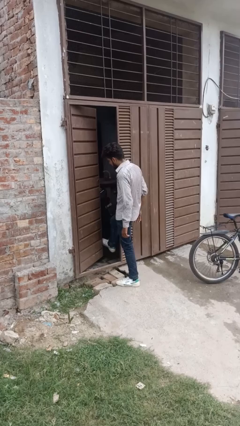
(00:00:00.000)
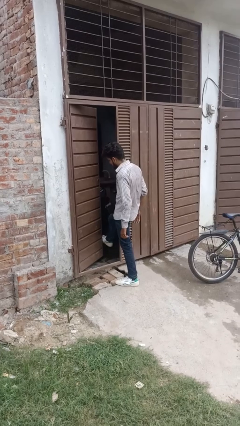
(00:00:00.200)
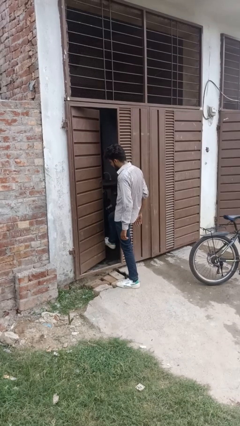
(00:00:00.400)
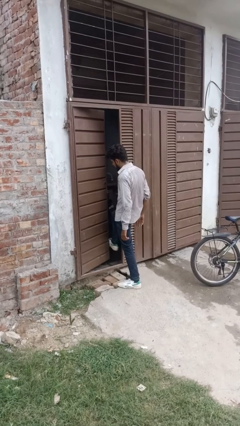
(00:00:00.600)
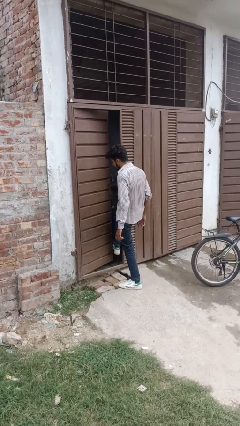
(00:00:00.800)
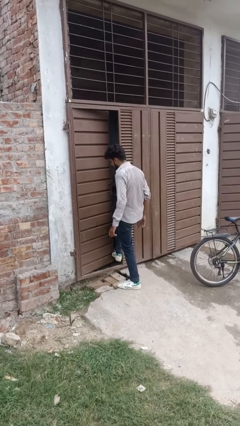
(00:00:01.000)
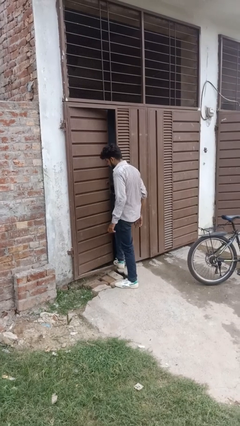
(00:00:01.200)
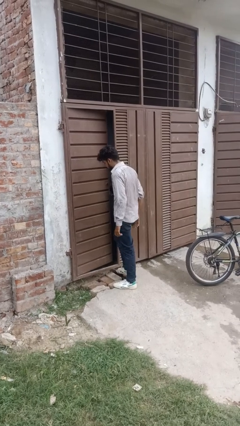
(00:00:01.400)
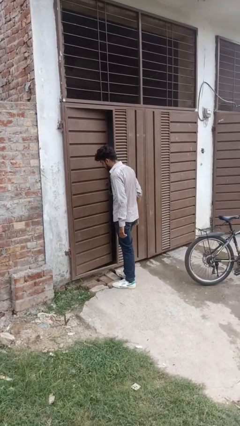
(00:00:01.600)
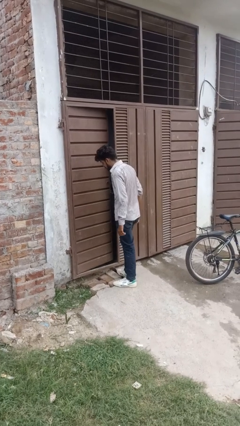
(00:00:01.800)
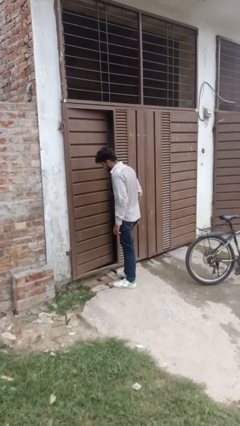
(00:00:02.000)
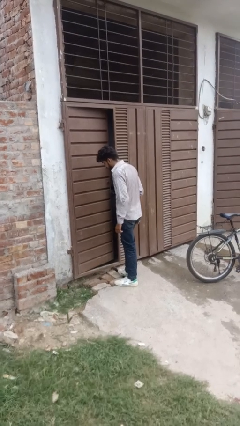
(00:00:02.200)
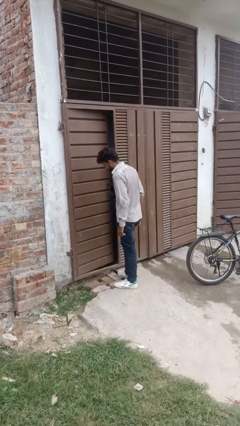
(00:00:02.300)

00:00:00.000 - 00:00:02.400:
person closes door with foot

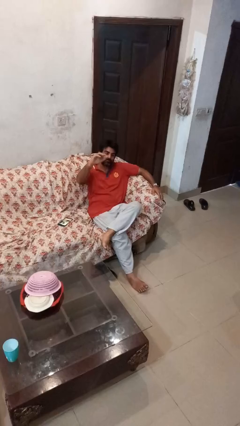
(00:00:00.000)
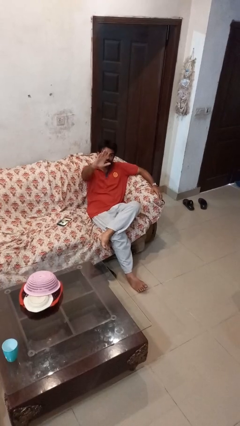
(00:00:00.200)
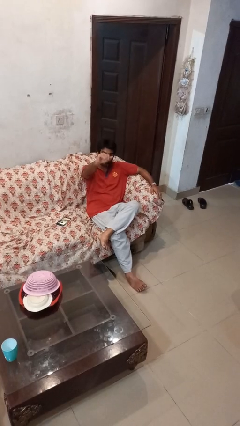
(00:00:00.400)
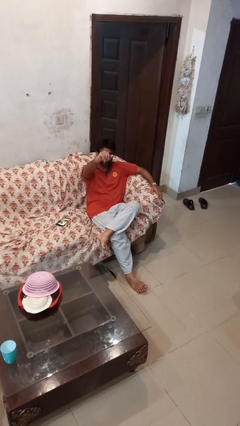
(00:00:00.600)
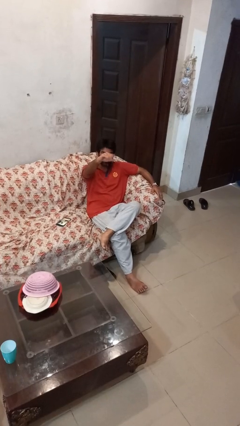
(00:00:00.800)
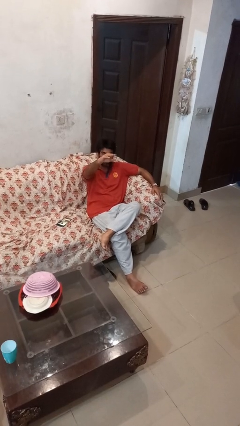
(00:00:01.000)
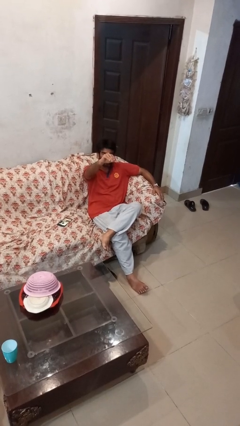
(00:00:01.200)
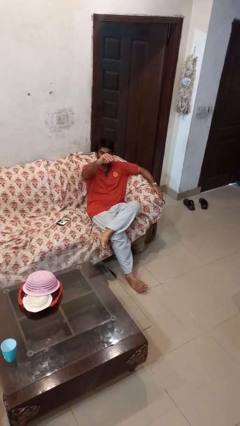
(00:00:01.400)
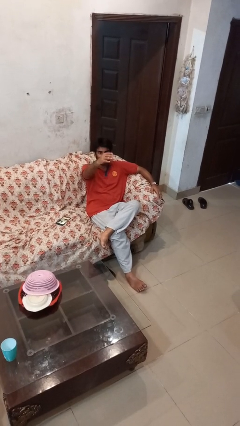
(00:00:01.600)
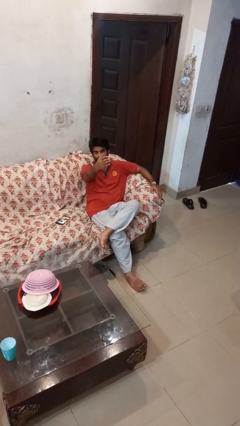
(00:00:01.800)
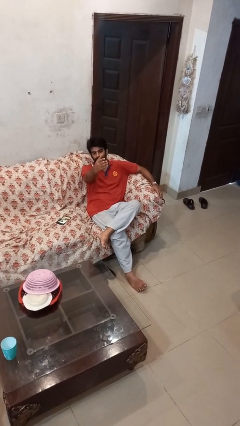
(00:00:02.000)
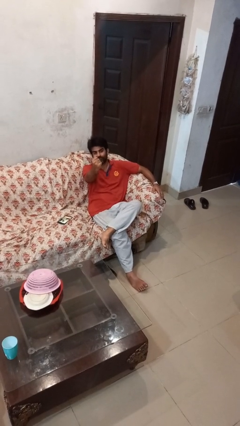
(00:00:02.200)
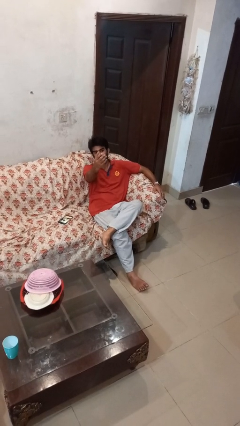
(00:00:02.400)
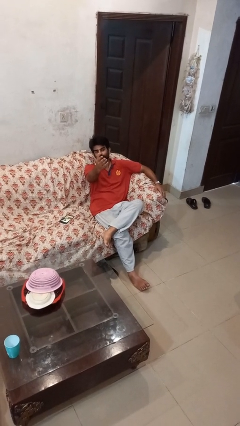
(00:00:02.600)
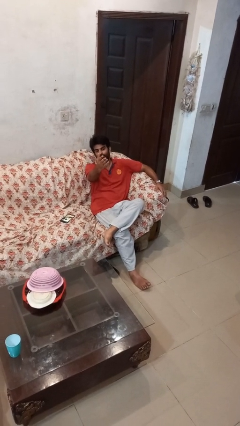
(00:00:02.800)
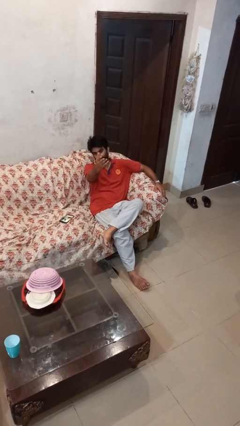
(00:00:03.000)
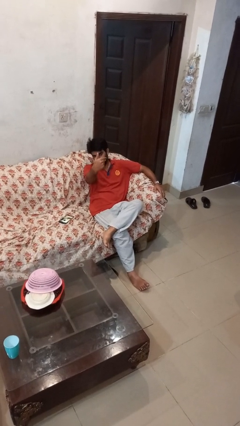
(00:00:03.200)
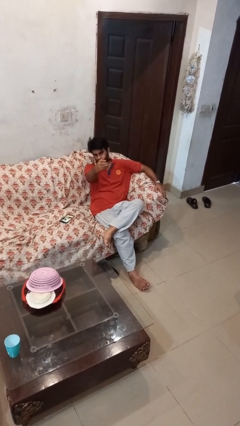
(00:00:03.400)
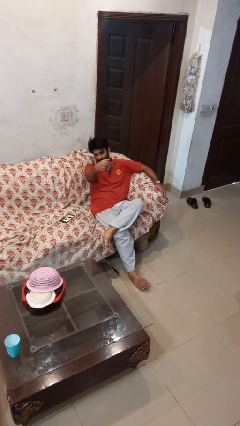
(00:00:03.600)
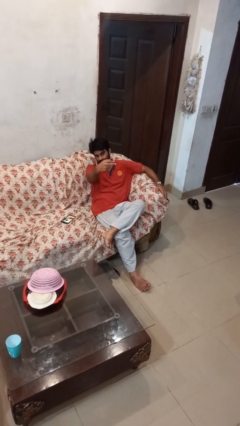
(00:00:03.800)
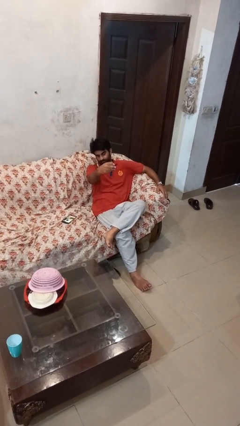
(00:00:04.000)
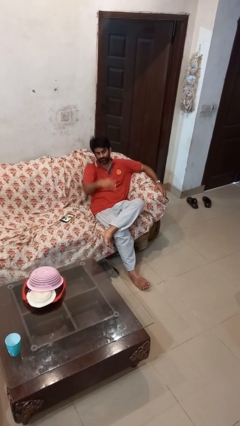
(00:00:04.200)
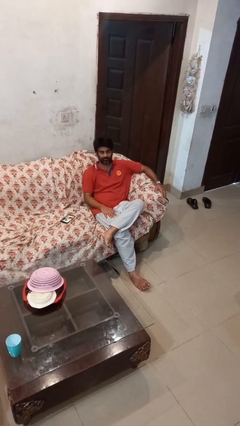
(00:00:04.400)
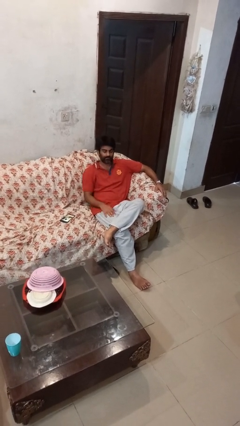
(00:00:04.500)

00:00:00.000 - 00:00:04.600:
person gestures come here

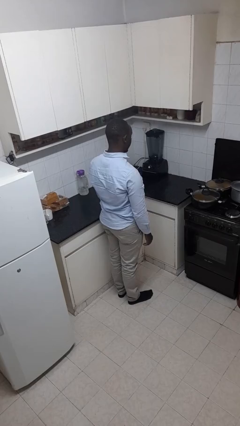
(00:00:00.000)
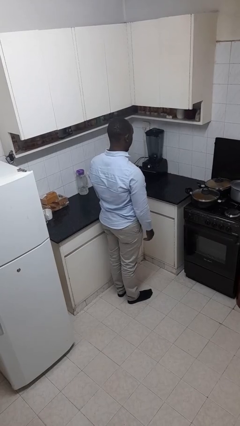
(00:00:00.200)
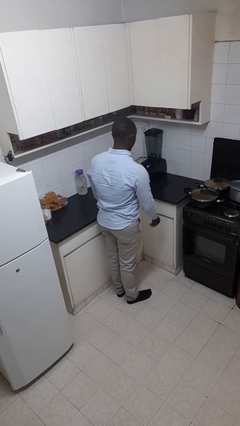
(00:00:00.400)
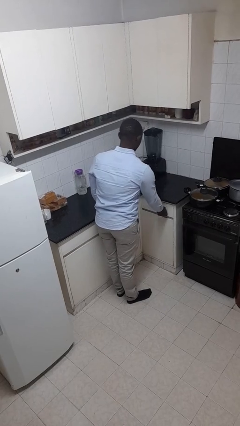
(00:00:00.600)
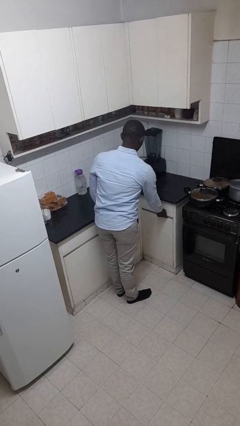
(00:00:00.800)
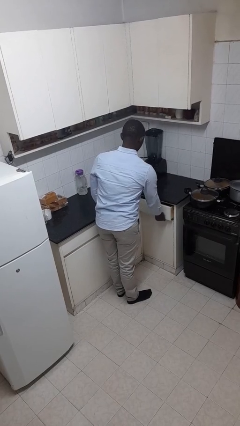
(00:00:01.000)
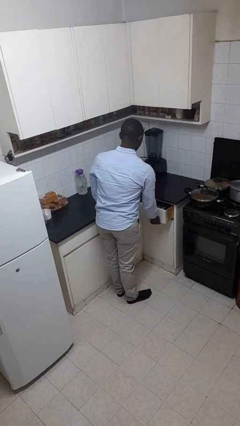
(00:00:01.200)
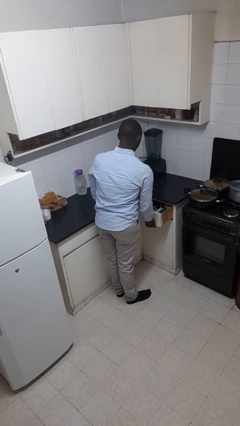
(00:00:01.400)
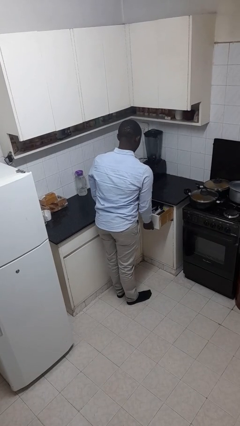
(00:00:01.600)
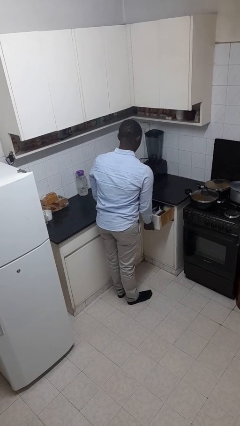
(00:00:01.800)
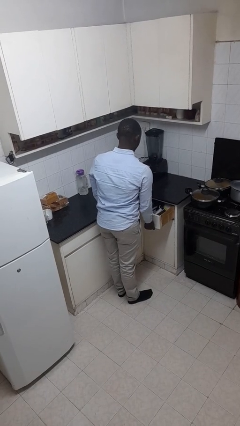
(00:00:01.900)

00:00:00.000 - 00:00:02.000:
person opens kitchen drawer

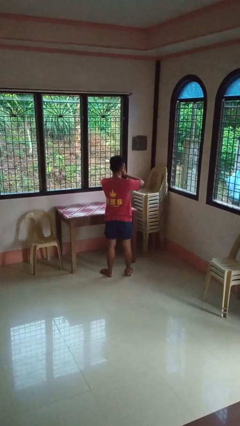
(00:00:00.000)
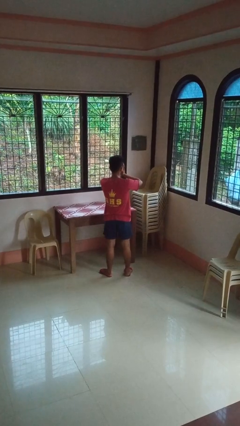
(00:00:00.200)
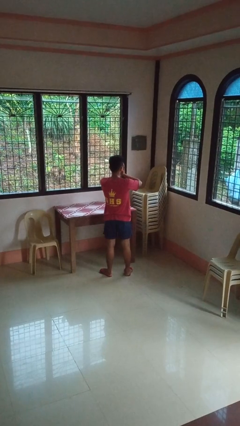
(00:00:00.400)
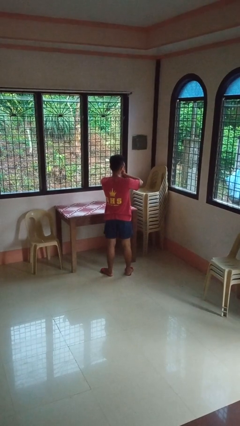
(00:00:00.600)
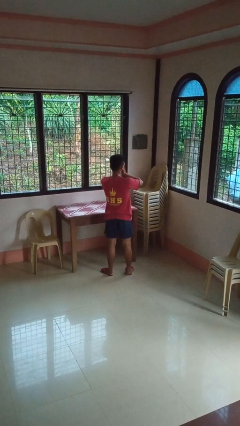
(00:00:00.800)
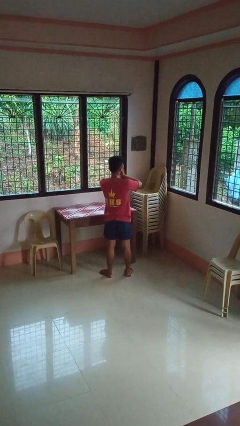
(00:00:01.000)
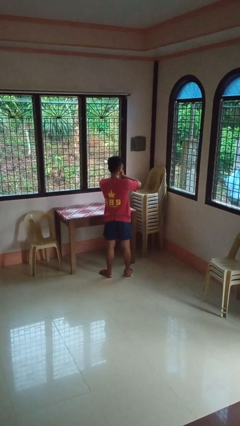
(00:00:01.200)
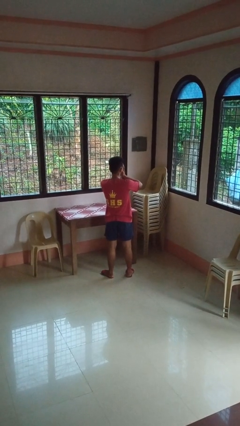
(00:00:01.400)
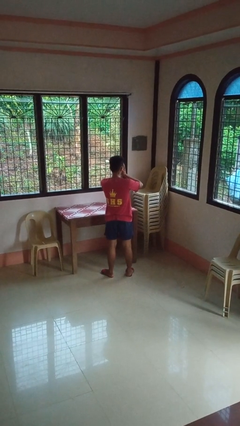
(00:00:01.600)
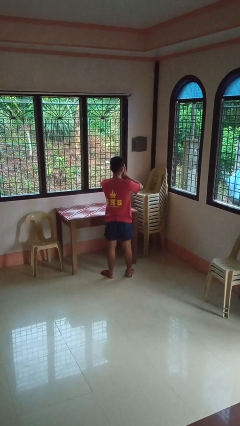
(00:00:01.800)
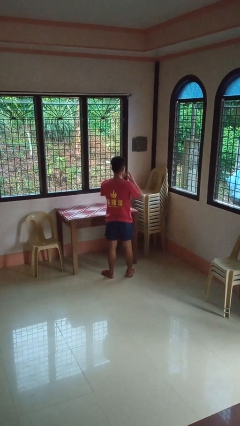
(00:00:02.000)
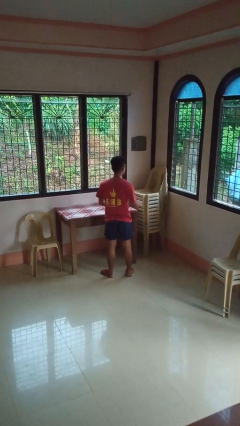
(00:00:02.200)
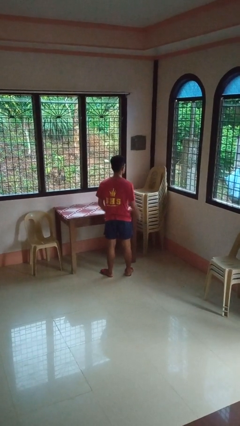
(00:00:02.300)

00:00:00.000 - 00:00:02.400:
person covers face with hands

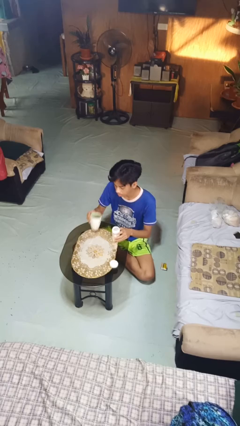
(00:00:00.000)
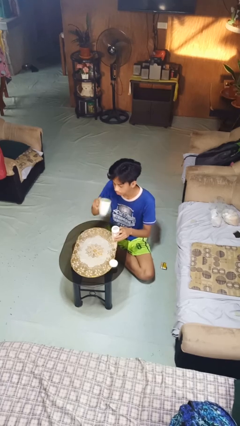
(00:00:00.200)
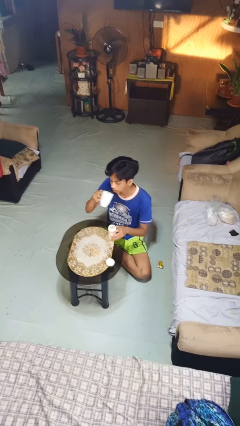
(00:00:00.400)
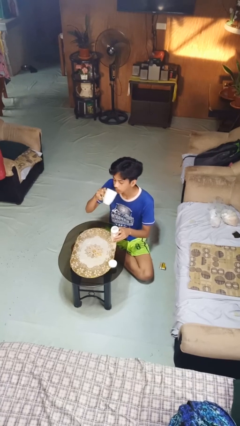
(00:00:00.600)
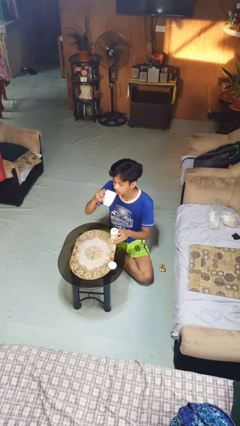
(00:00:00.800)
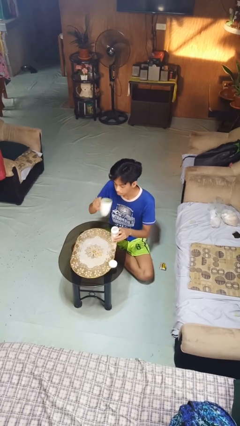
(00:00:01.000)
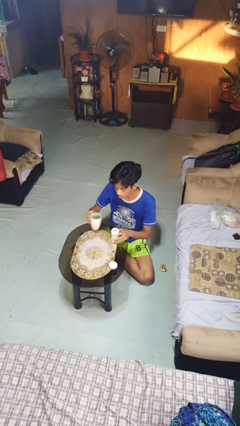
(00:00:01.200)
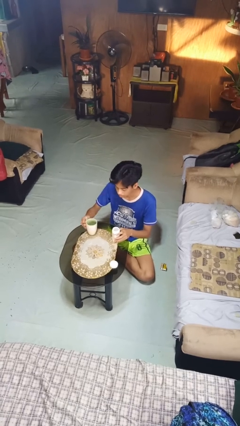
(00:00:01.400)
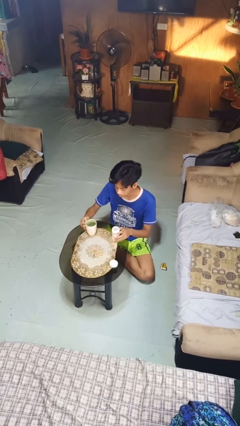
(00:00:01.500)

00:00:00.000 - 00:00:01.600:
person drinks from cup

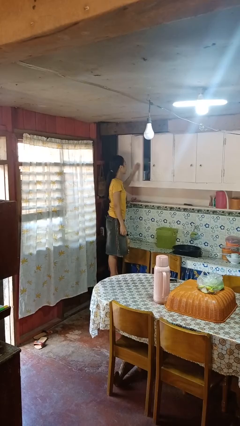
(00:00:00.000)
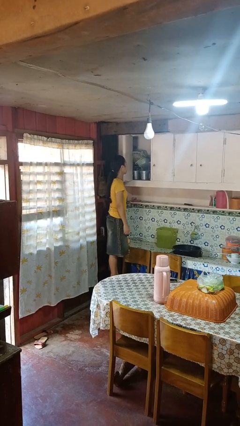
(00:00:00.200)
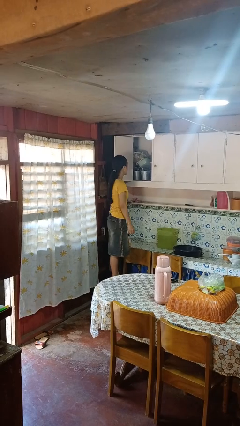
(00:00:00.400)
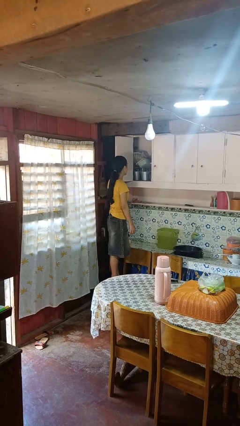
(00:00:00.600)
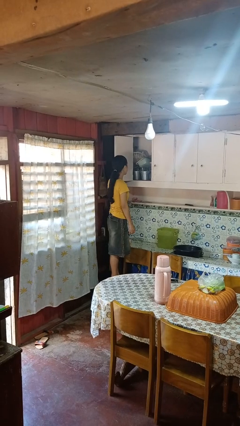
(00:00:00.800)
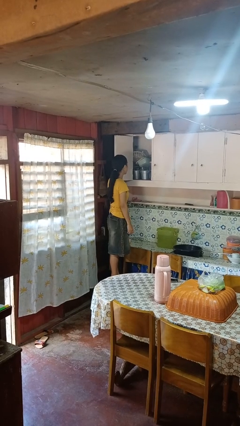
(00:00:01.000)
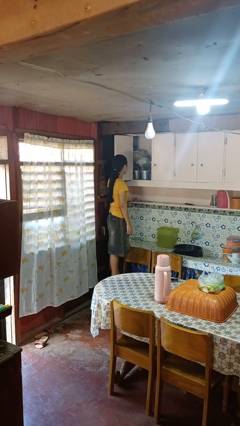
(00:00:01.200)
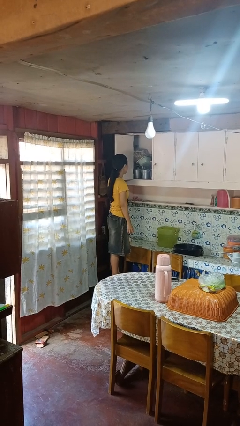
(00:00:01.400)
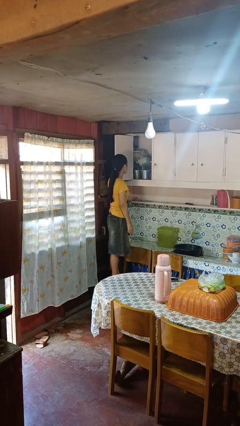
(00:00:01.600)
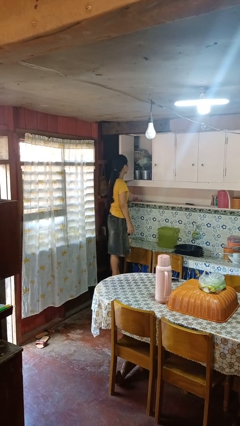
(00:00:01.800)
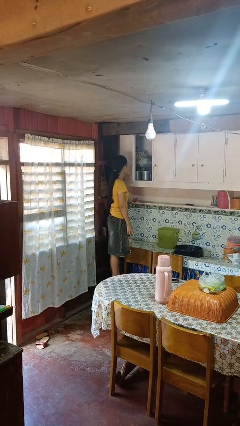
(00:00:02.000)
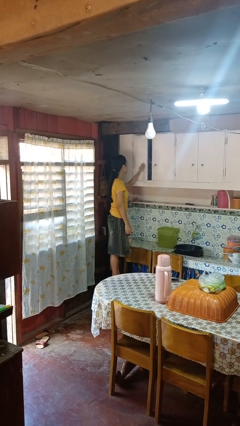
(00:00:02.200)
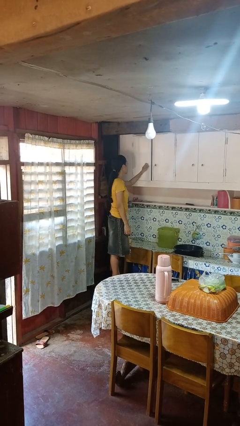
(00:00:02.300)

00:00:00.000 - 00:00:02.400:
person opens cabinet

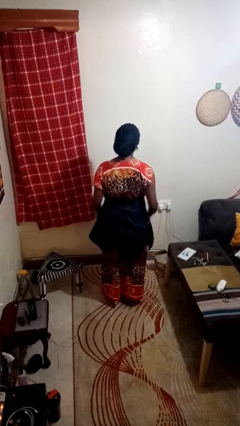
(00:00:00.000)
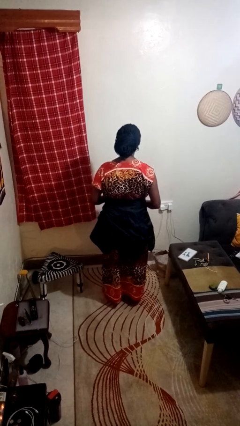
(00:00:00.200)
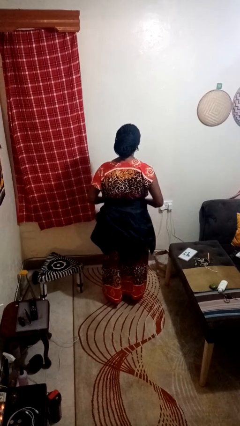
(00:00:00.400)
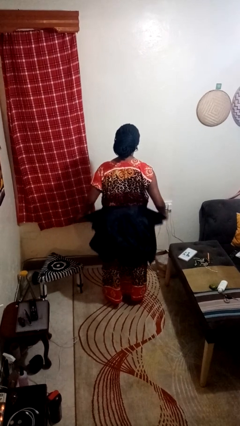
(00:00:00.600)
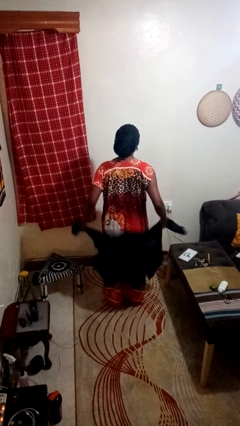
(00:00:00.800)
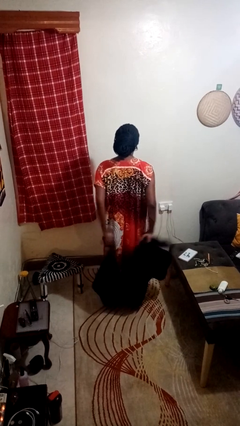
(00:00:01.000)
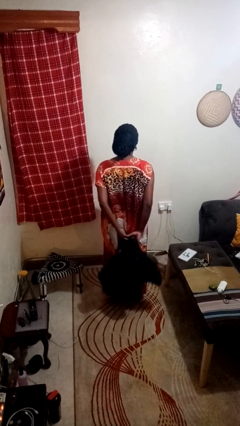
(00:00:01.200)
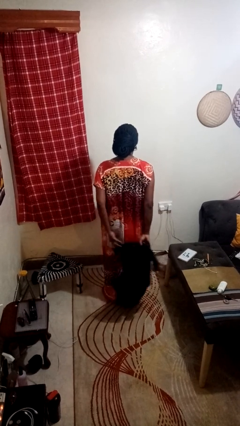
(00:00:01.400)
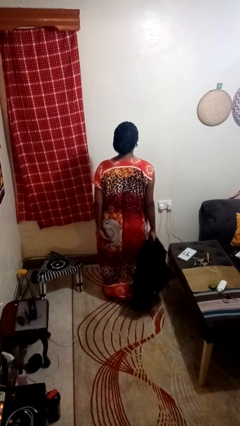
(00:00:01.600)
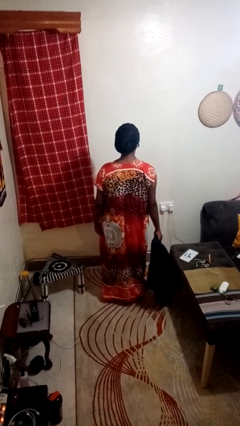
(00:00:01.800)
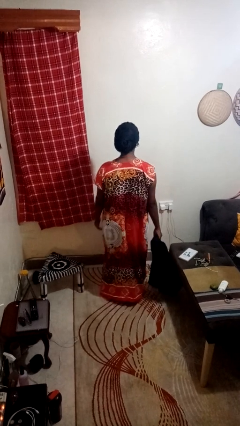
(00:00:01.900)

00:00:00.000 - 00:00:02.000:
person unties jacket around waist
